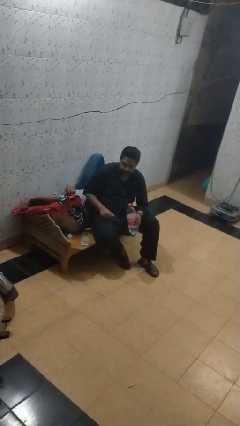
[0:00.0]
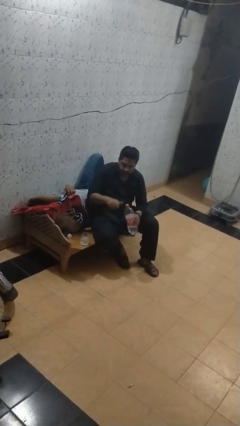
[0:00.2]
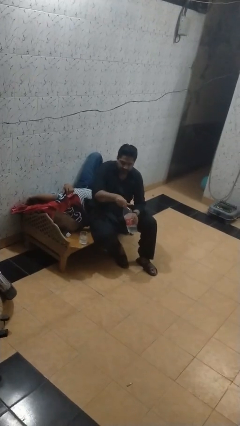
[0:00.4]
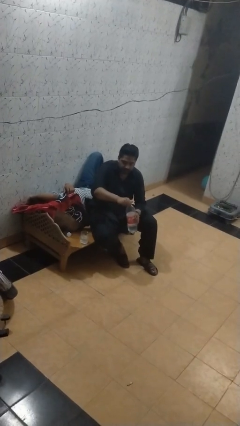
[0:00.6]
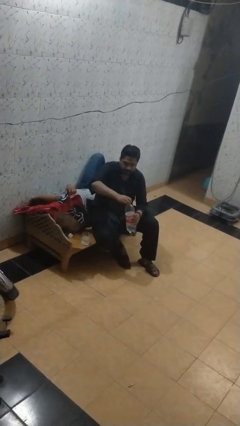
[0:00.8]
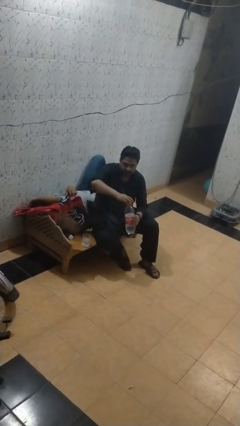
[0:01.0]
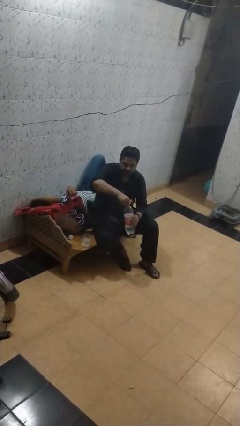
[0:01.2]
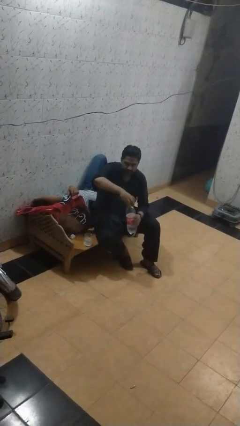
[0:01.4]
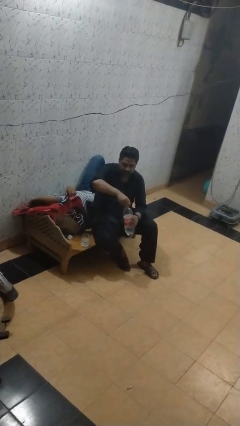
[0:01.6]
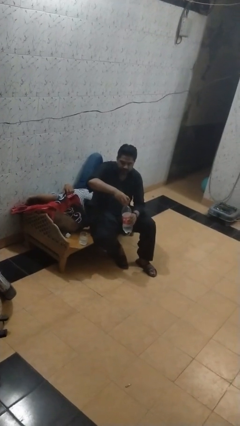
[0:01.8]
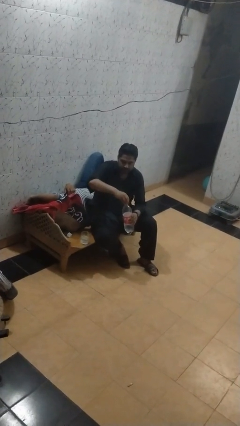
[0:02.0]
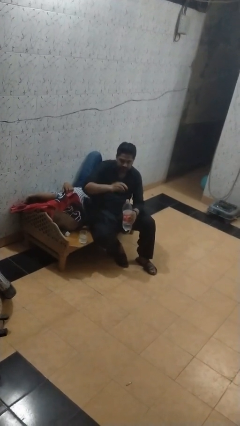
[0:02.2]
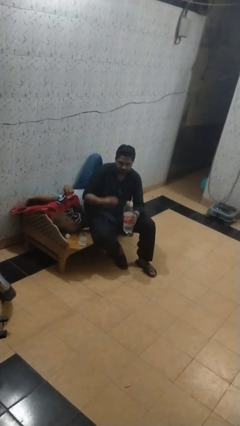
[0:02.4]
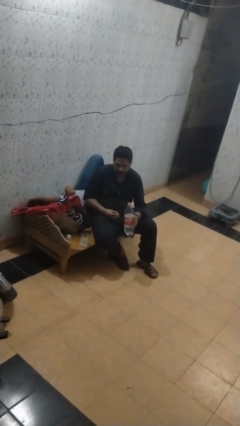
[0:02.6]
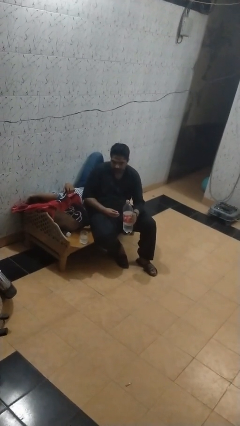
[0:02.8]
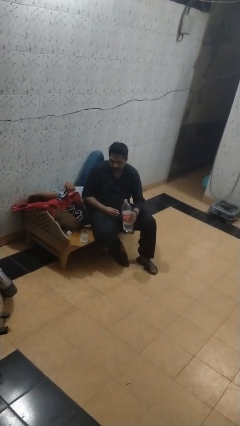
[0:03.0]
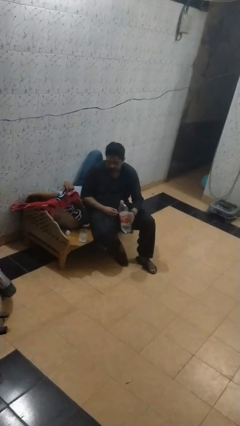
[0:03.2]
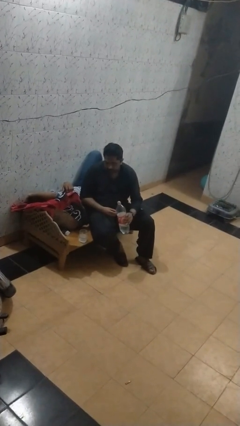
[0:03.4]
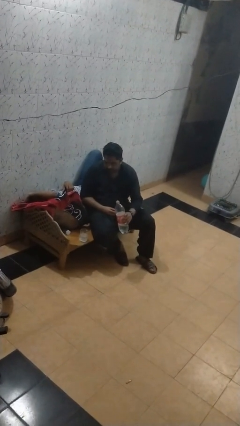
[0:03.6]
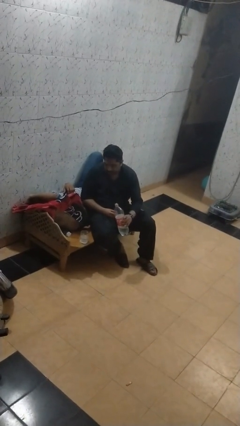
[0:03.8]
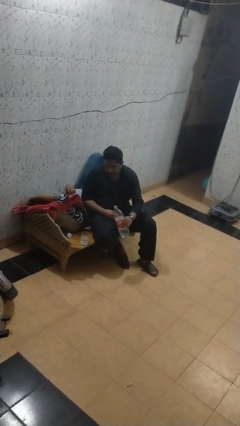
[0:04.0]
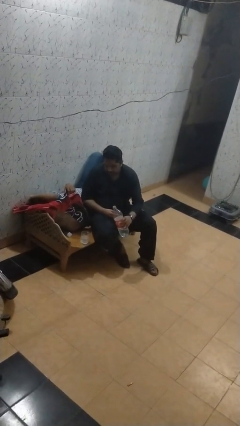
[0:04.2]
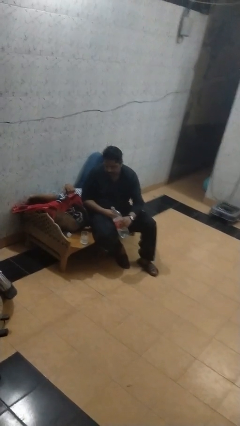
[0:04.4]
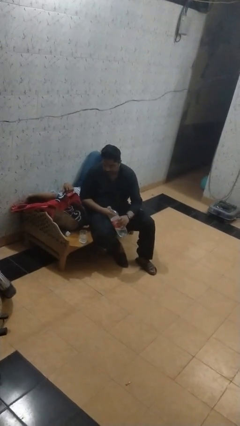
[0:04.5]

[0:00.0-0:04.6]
person unscrews lid from bottle

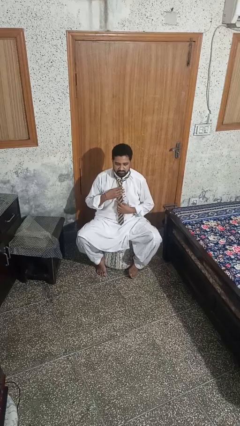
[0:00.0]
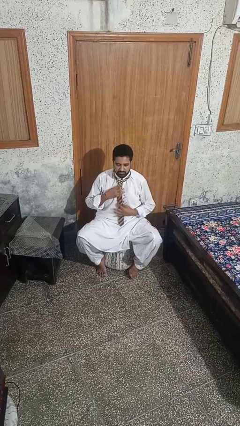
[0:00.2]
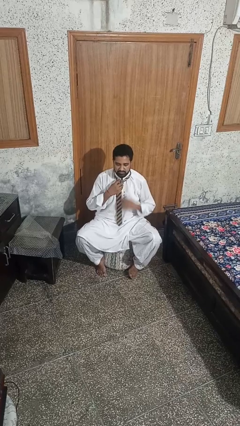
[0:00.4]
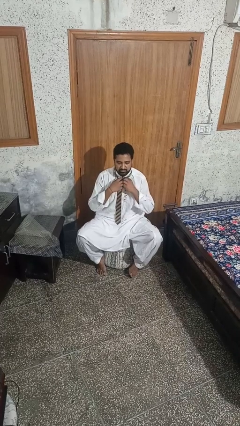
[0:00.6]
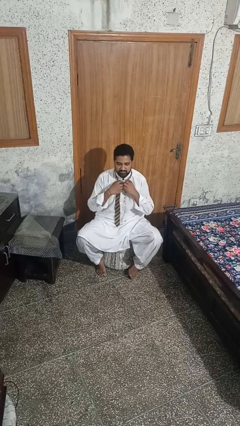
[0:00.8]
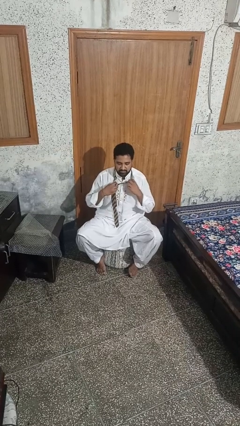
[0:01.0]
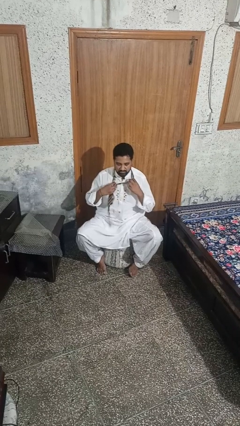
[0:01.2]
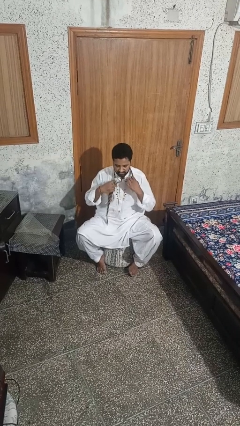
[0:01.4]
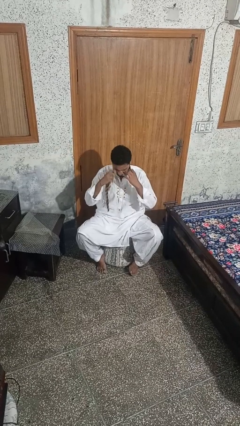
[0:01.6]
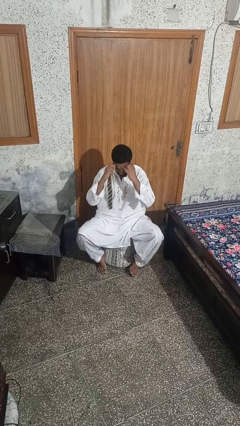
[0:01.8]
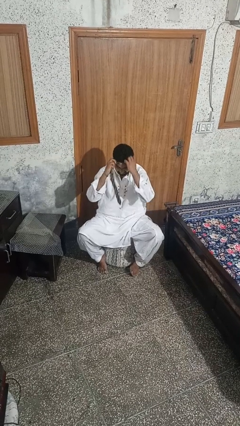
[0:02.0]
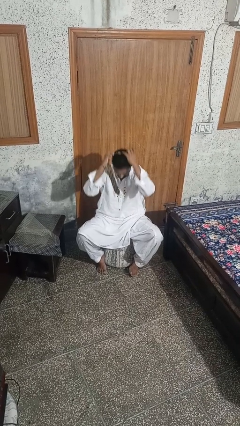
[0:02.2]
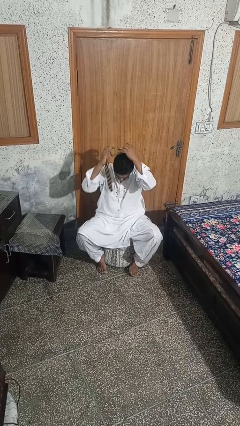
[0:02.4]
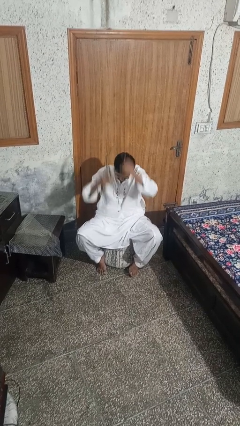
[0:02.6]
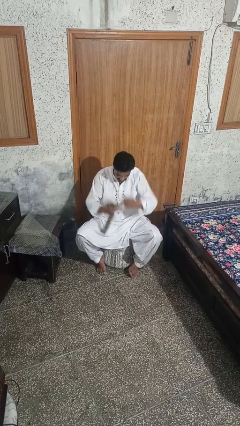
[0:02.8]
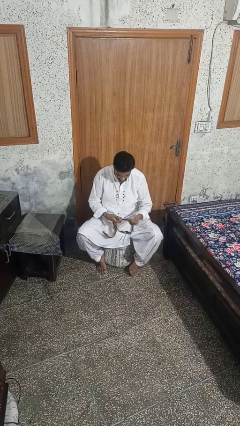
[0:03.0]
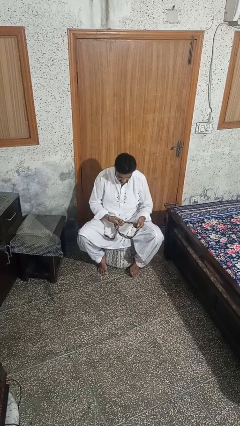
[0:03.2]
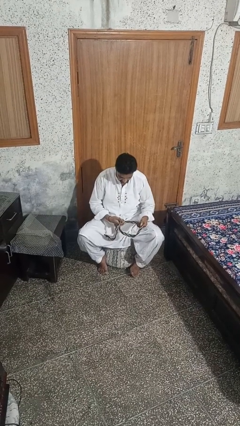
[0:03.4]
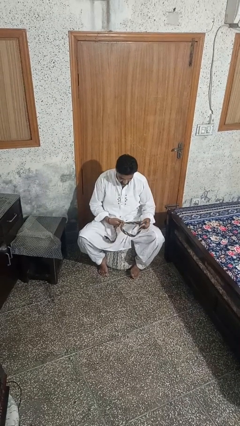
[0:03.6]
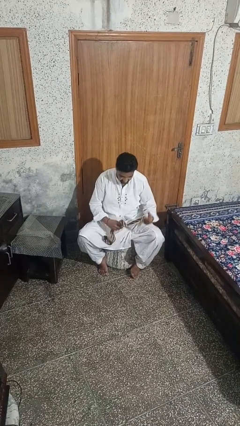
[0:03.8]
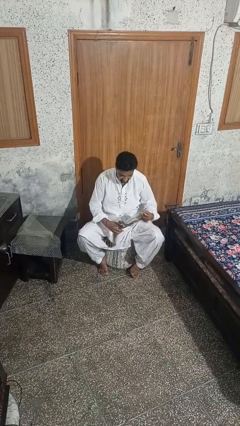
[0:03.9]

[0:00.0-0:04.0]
person takes off necktie

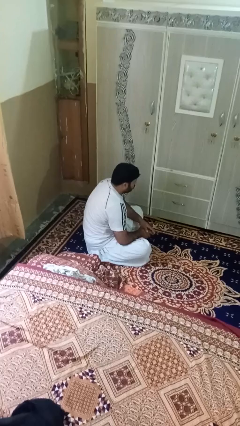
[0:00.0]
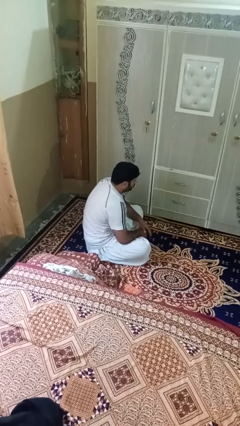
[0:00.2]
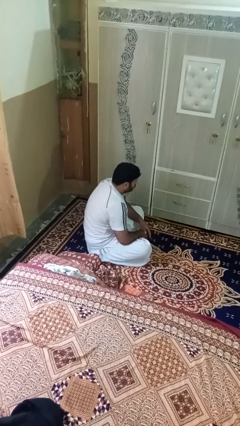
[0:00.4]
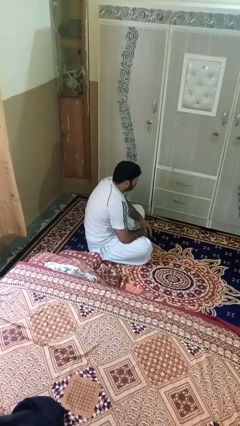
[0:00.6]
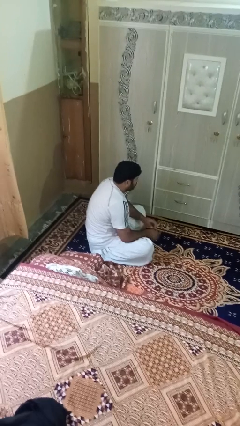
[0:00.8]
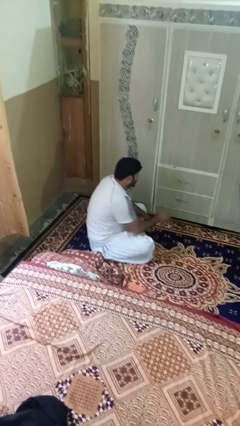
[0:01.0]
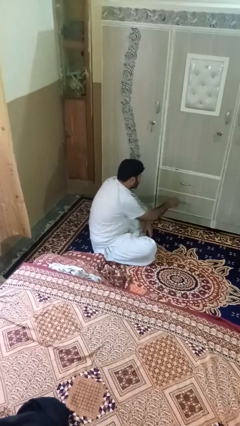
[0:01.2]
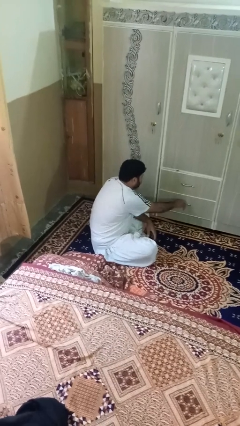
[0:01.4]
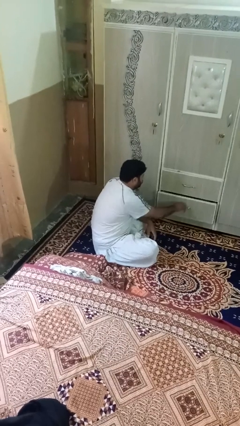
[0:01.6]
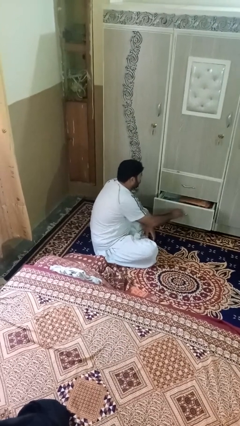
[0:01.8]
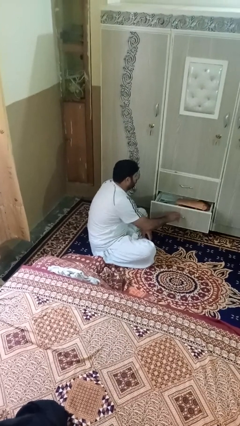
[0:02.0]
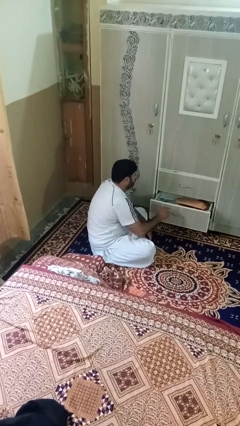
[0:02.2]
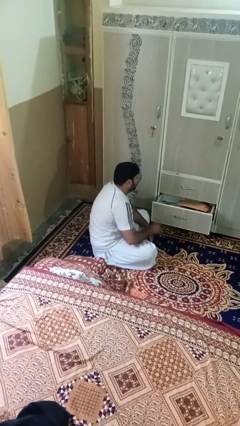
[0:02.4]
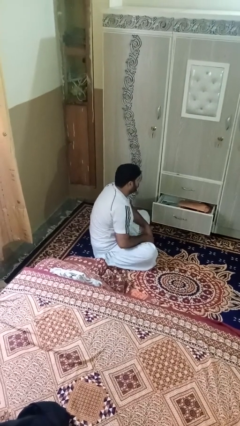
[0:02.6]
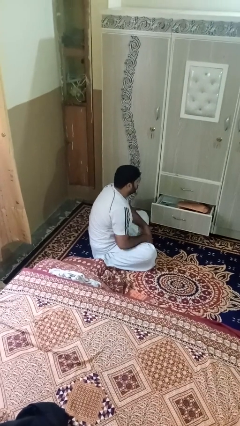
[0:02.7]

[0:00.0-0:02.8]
person opens dresser drawer

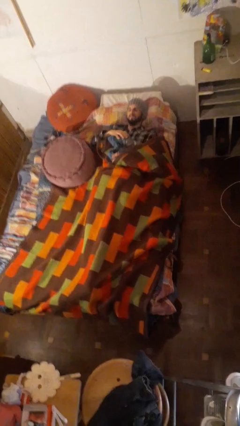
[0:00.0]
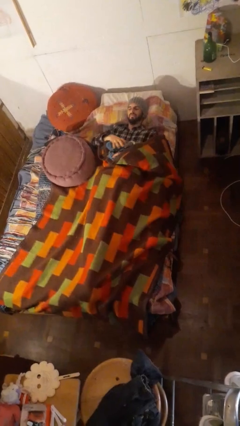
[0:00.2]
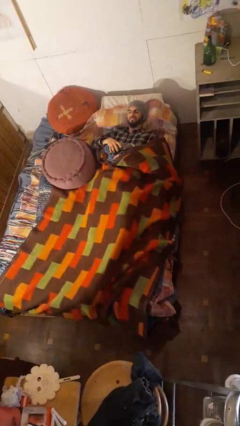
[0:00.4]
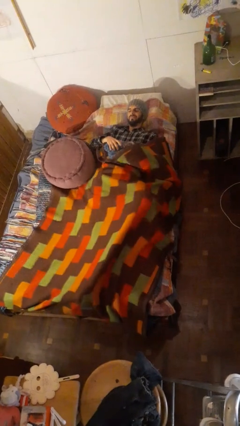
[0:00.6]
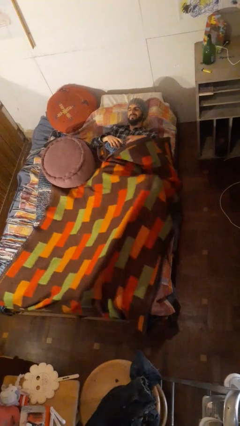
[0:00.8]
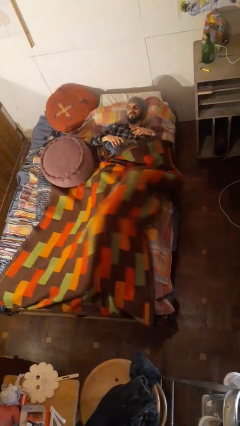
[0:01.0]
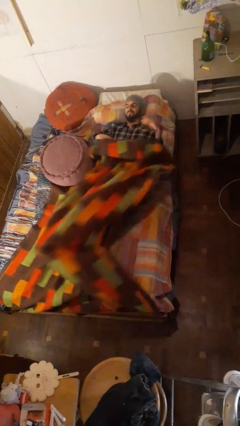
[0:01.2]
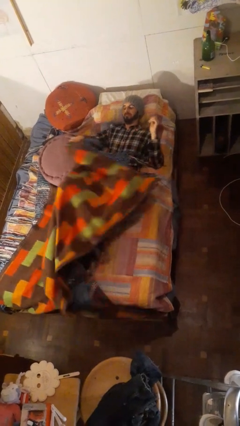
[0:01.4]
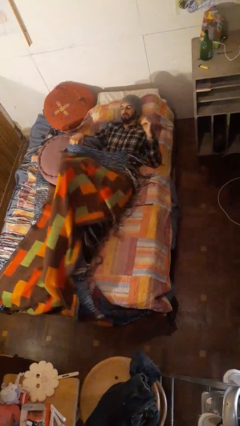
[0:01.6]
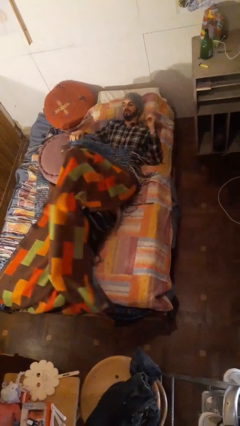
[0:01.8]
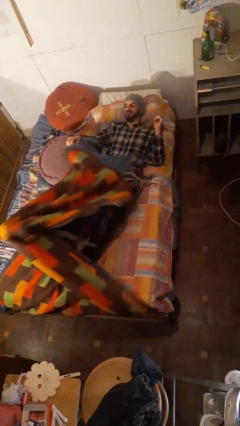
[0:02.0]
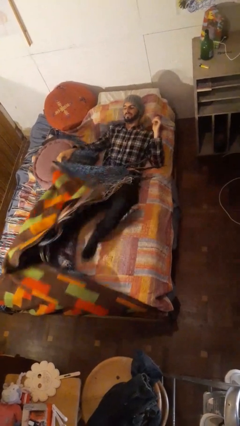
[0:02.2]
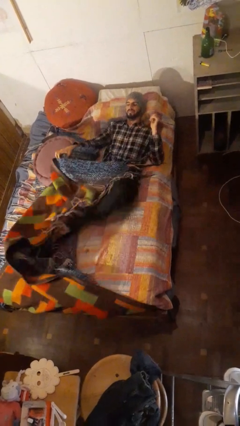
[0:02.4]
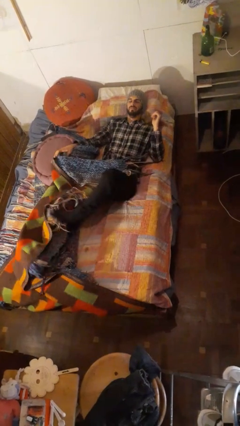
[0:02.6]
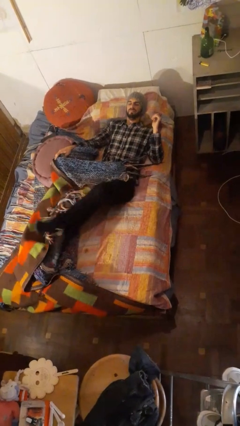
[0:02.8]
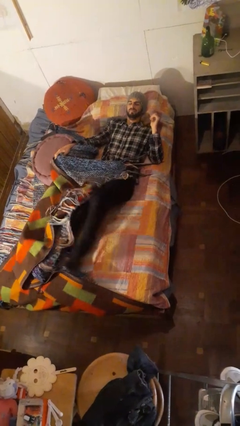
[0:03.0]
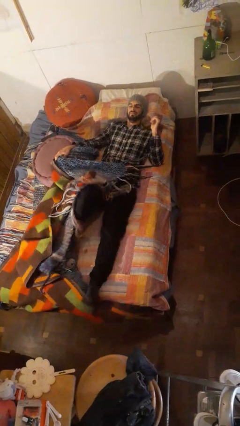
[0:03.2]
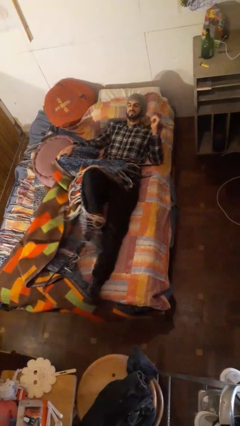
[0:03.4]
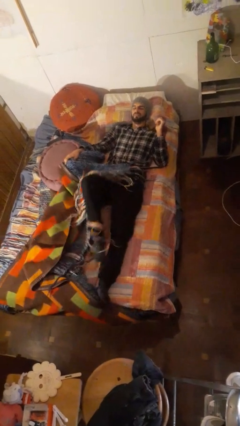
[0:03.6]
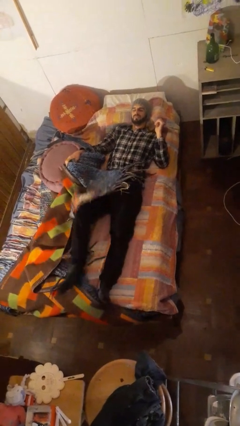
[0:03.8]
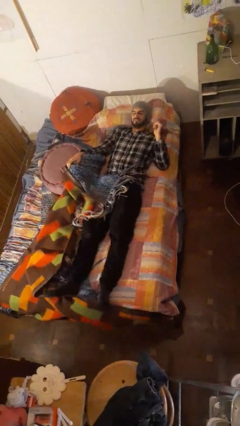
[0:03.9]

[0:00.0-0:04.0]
person uncovers with bedsheets

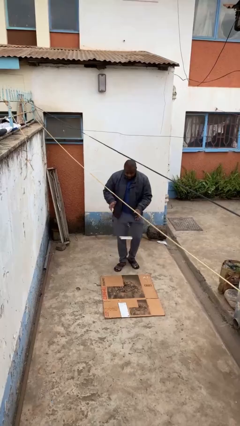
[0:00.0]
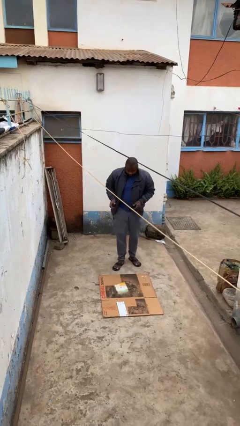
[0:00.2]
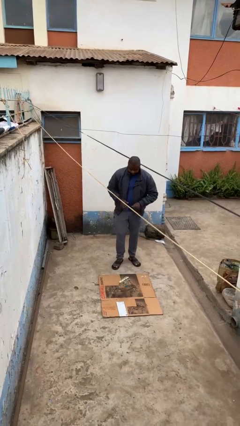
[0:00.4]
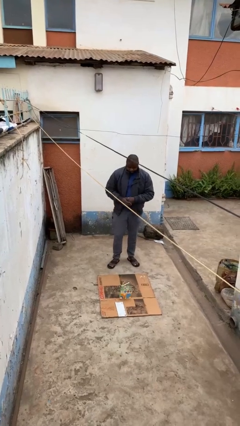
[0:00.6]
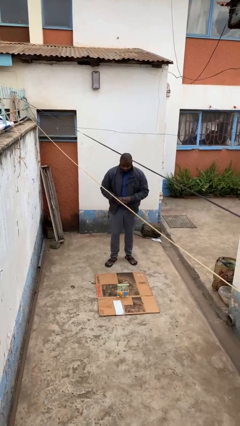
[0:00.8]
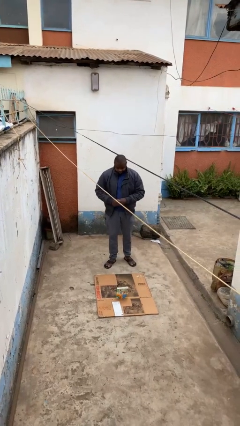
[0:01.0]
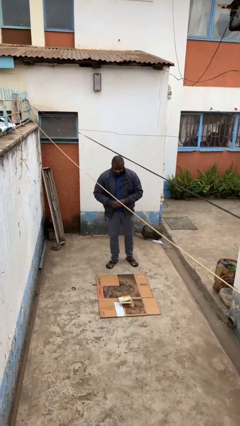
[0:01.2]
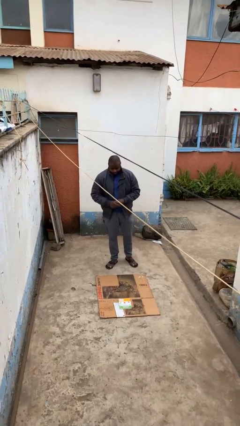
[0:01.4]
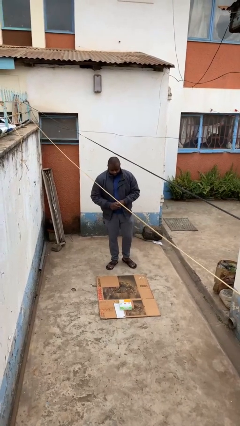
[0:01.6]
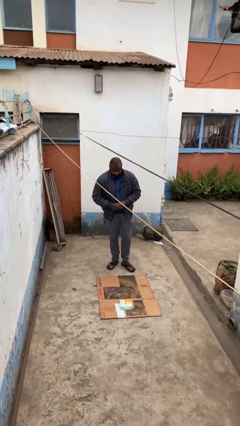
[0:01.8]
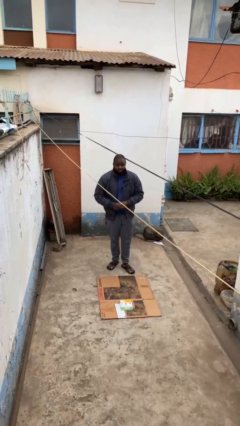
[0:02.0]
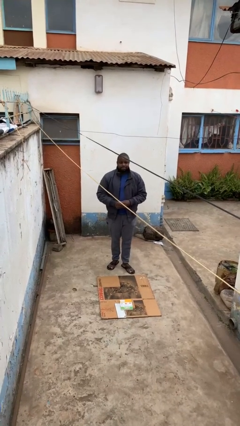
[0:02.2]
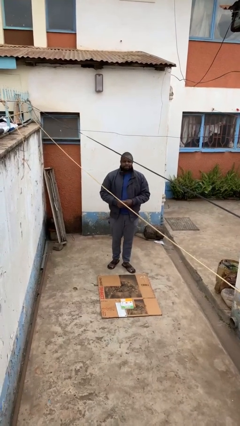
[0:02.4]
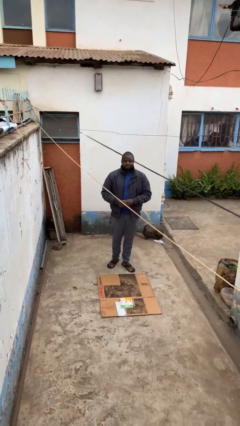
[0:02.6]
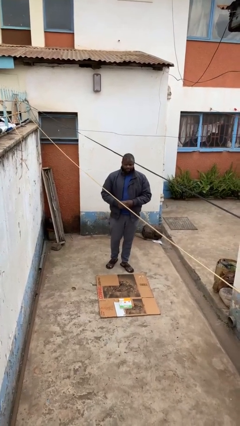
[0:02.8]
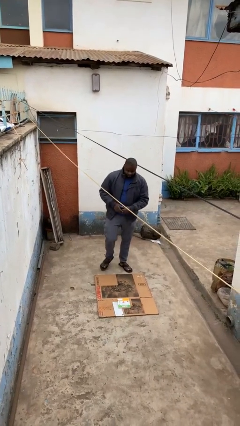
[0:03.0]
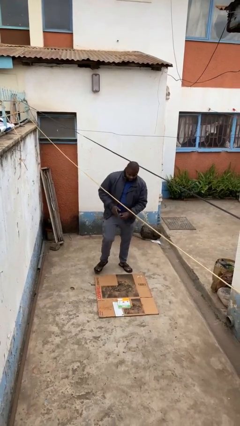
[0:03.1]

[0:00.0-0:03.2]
person drops object
